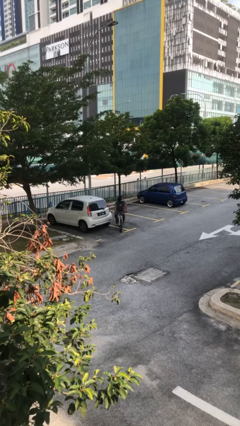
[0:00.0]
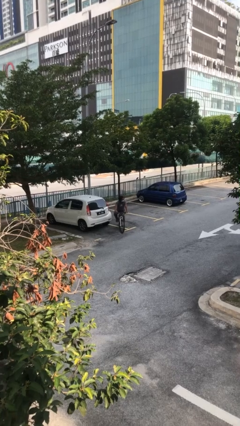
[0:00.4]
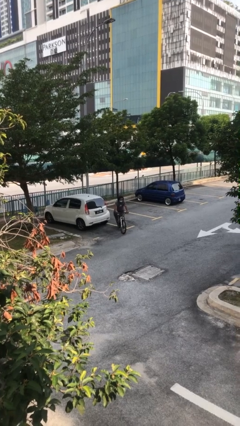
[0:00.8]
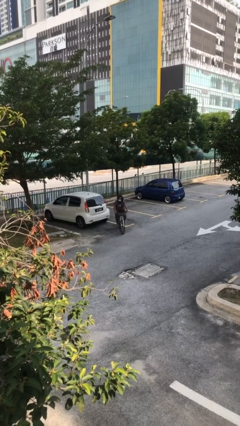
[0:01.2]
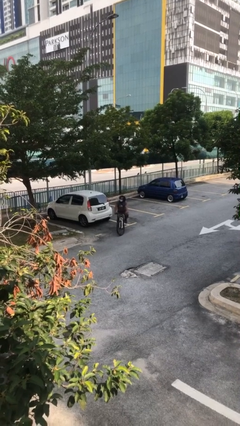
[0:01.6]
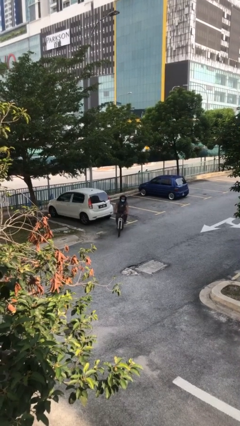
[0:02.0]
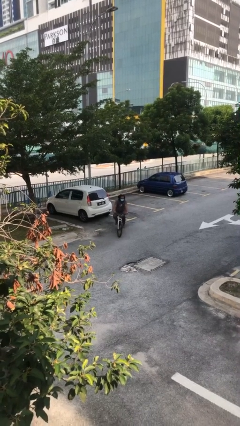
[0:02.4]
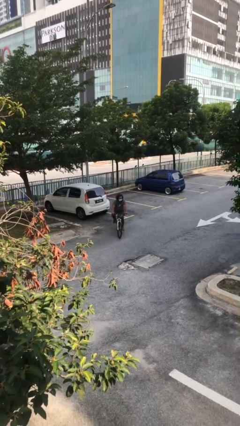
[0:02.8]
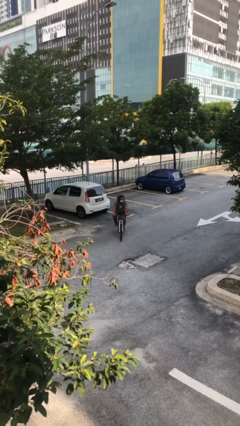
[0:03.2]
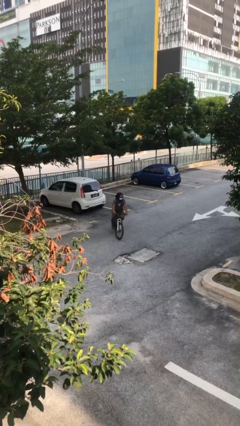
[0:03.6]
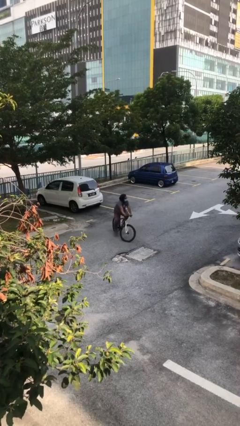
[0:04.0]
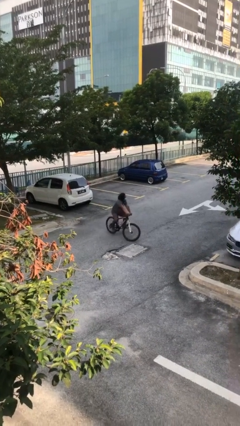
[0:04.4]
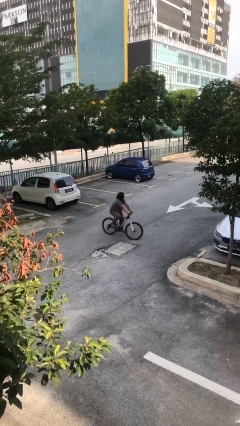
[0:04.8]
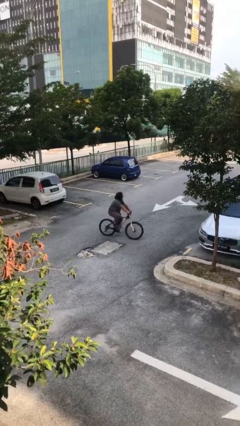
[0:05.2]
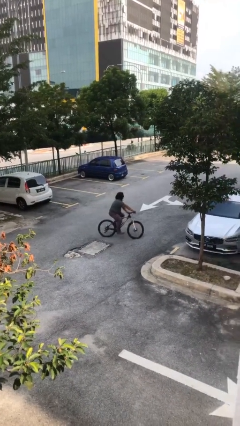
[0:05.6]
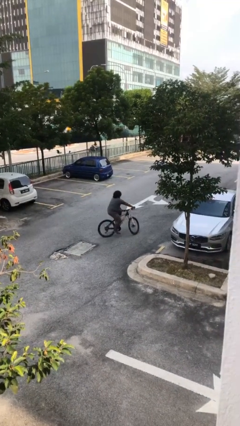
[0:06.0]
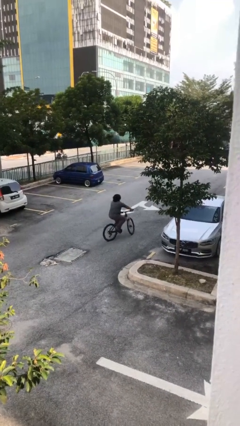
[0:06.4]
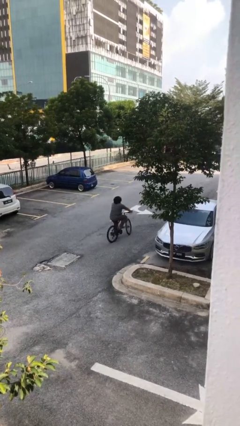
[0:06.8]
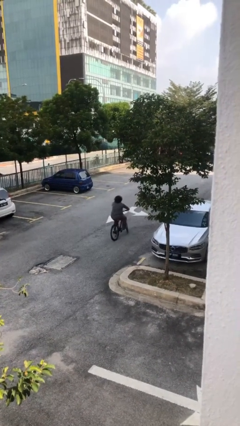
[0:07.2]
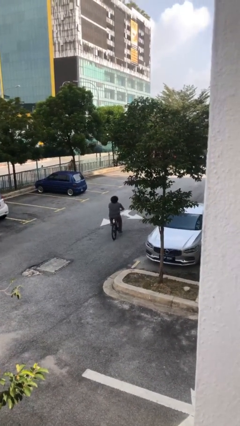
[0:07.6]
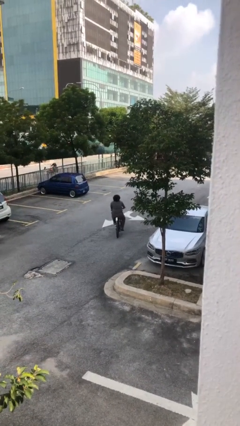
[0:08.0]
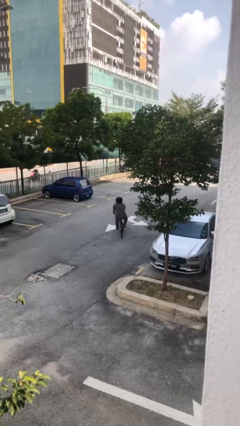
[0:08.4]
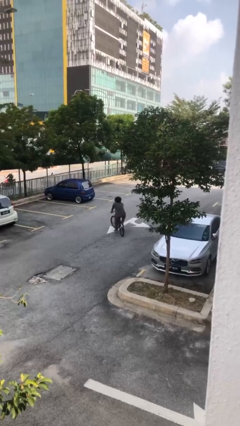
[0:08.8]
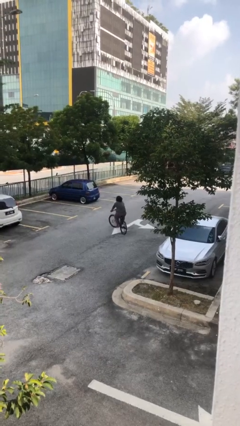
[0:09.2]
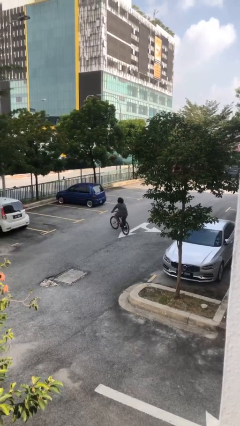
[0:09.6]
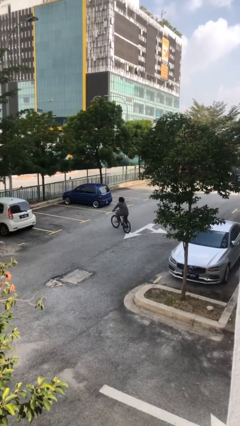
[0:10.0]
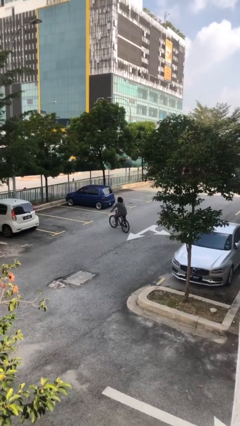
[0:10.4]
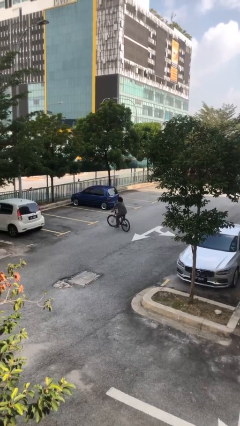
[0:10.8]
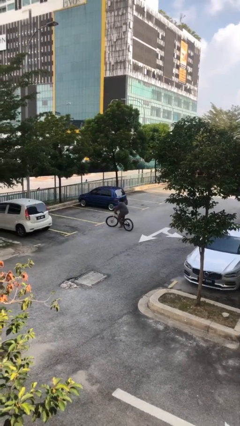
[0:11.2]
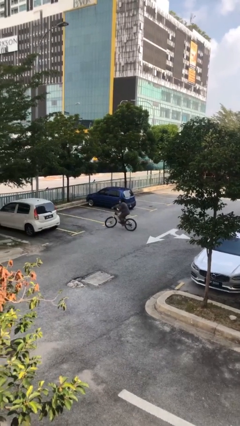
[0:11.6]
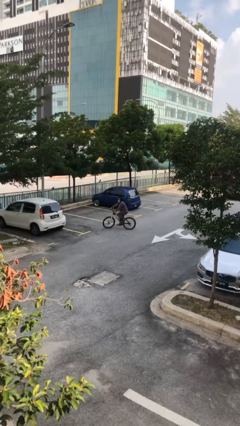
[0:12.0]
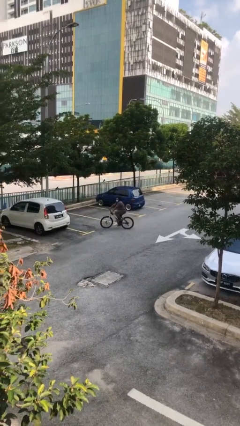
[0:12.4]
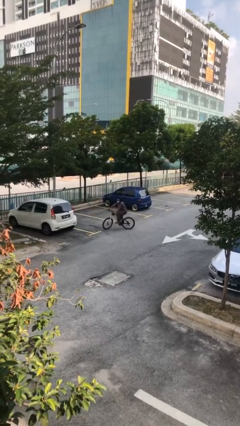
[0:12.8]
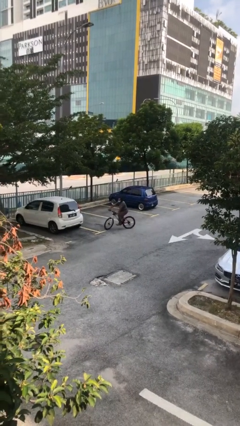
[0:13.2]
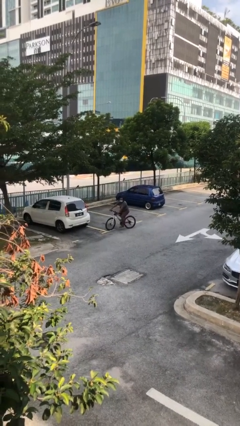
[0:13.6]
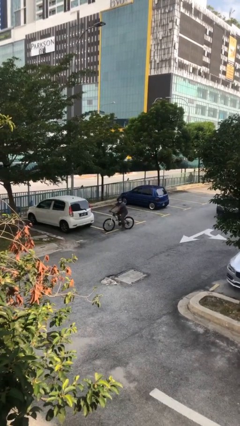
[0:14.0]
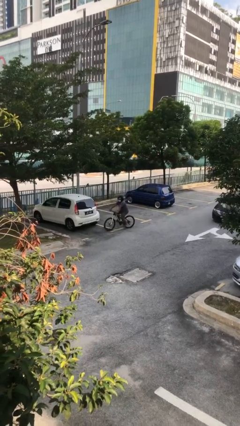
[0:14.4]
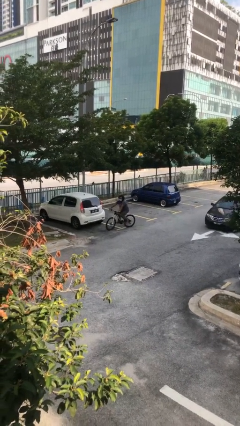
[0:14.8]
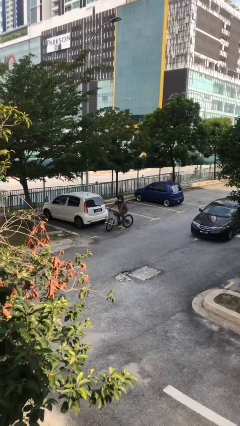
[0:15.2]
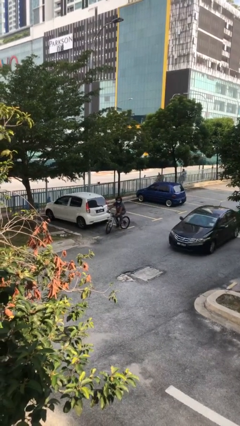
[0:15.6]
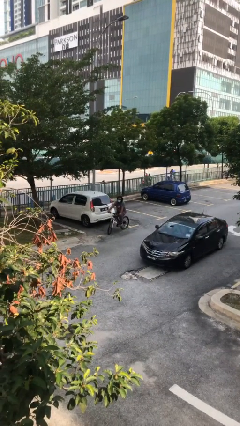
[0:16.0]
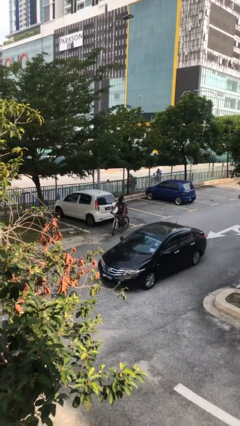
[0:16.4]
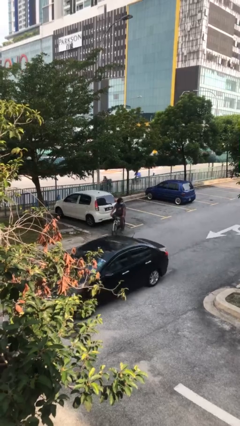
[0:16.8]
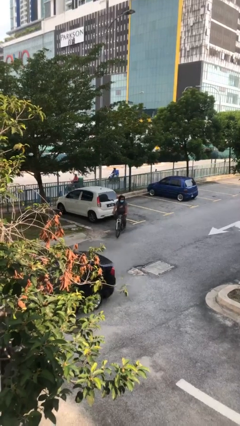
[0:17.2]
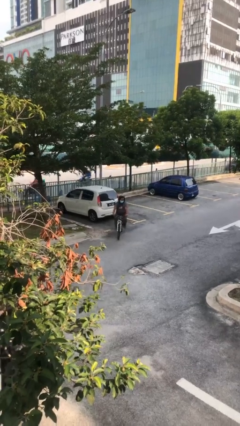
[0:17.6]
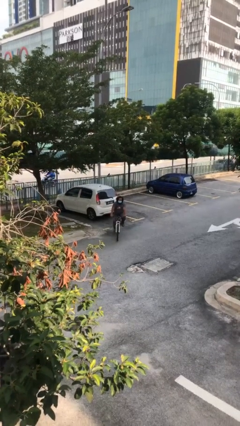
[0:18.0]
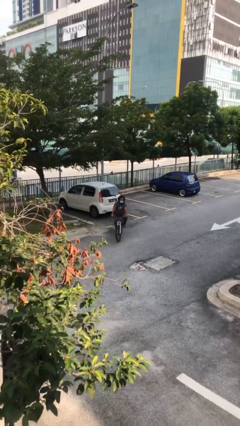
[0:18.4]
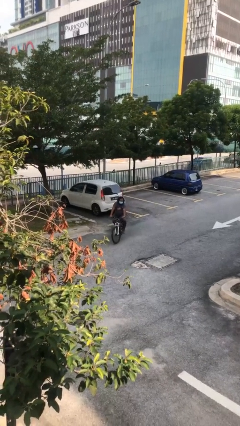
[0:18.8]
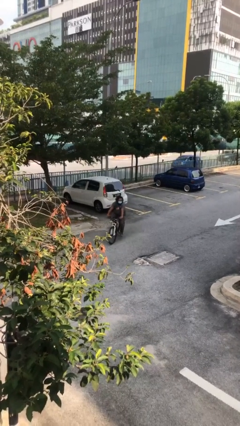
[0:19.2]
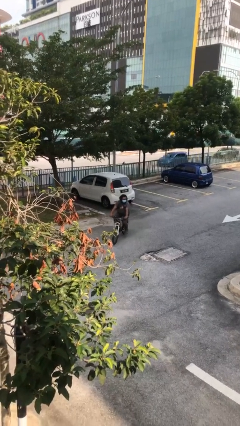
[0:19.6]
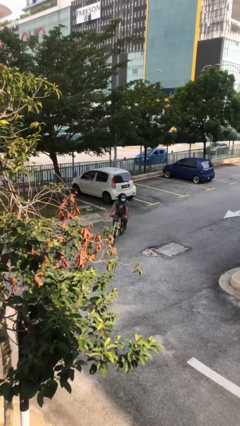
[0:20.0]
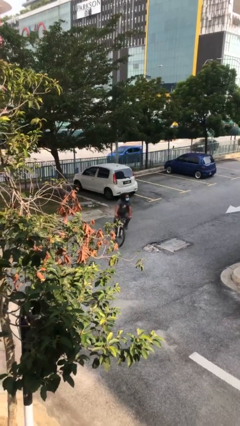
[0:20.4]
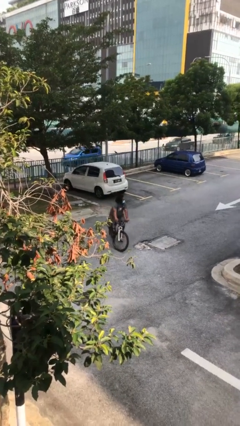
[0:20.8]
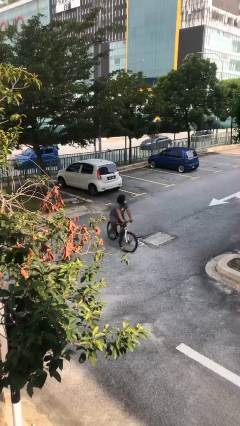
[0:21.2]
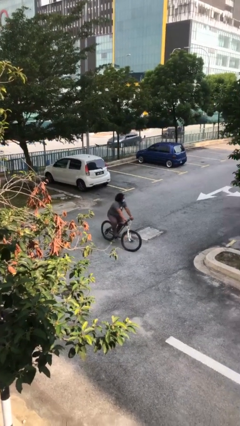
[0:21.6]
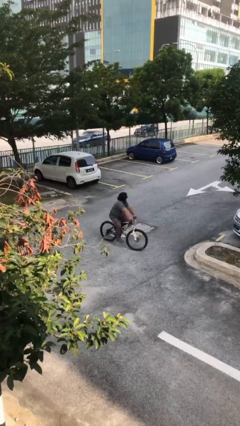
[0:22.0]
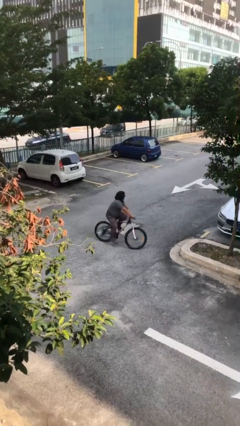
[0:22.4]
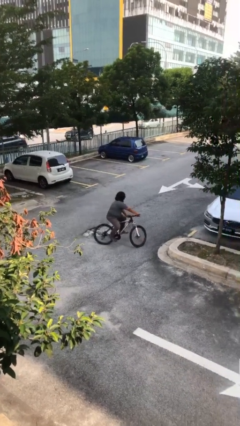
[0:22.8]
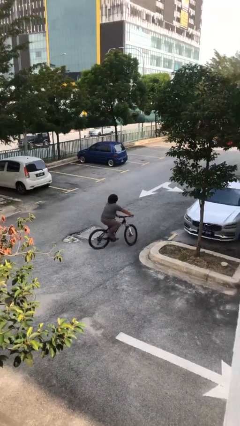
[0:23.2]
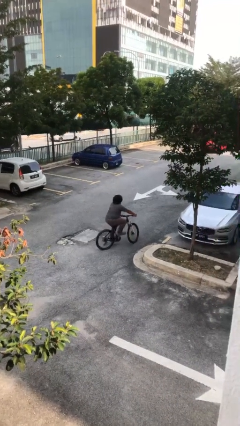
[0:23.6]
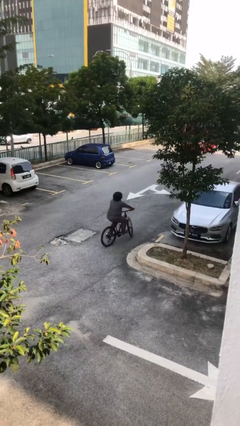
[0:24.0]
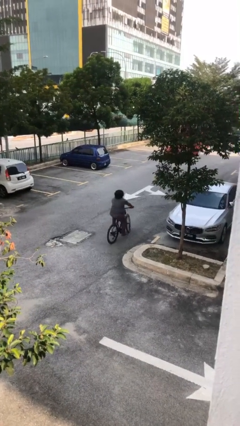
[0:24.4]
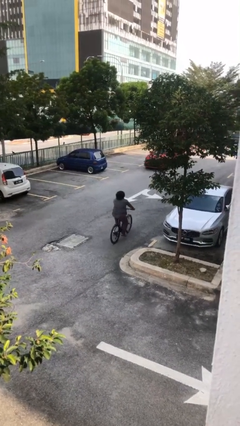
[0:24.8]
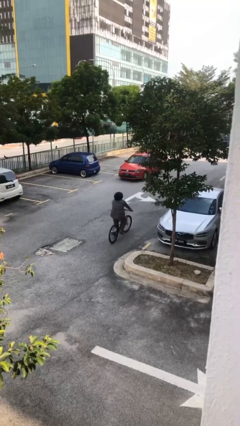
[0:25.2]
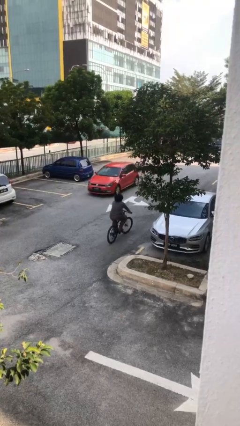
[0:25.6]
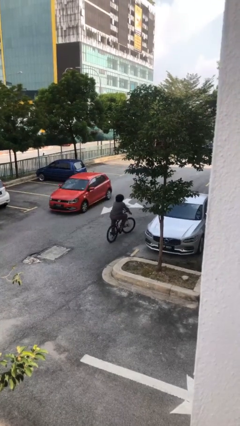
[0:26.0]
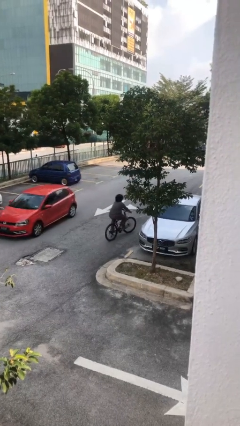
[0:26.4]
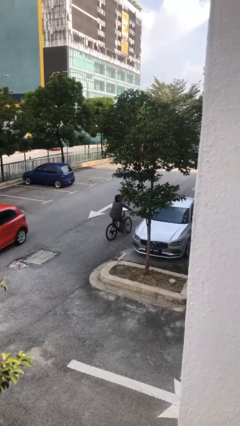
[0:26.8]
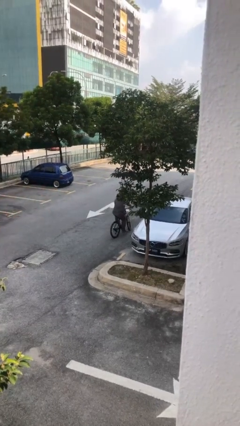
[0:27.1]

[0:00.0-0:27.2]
person rides bicycle

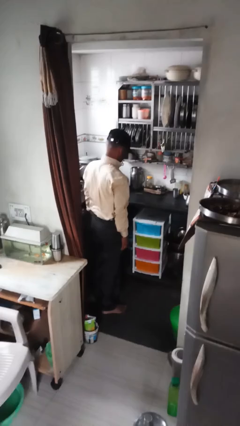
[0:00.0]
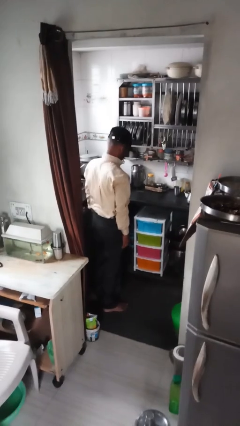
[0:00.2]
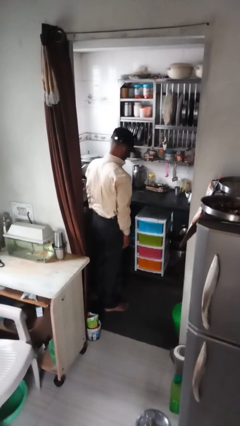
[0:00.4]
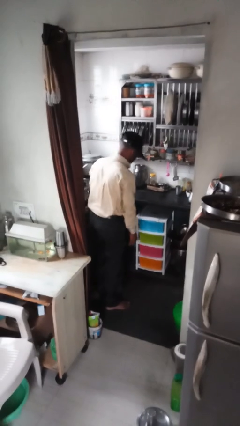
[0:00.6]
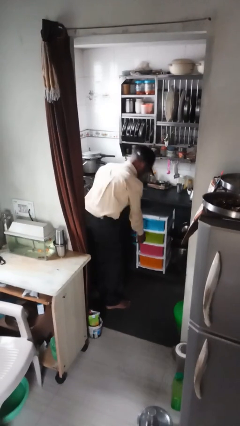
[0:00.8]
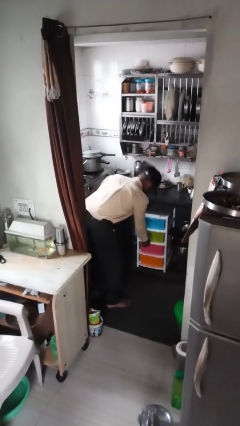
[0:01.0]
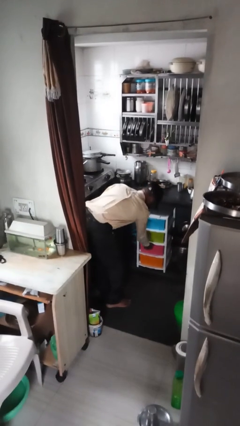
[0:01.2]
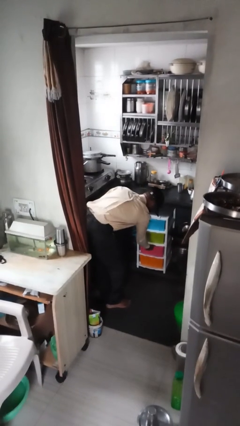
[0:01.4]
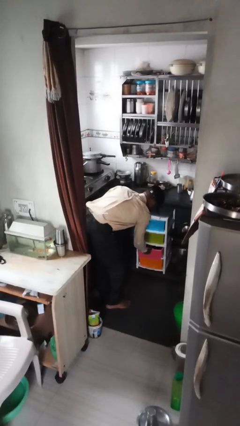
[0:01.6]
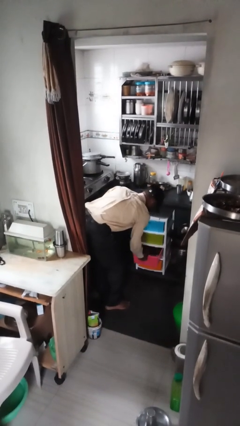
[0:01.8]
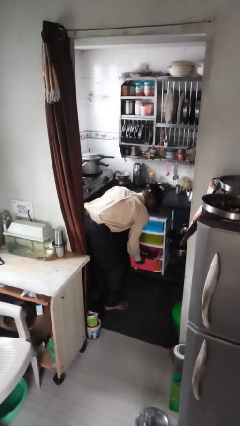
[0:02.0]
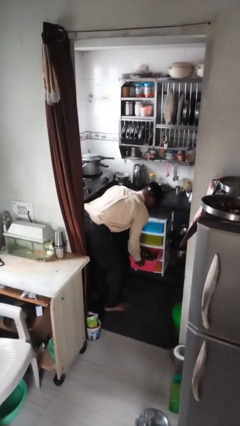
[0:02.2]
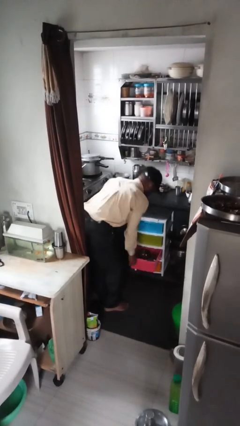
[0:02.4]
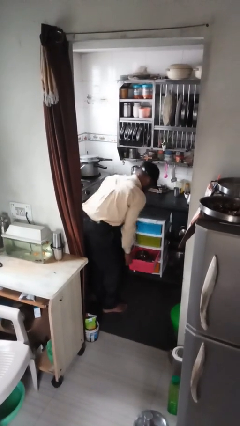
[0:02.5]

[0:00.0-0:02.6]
person opens kitchen drawer

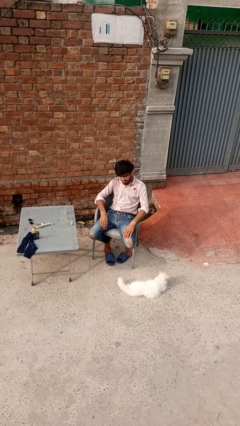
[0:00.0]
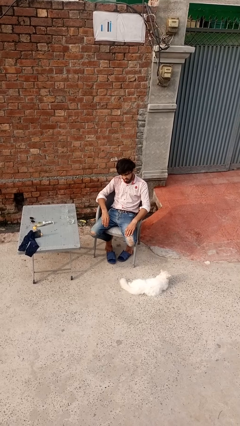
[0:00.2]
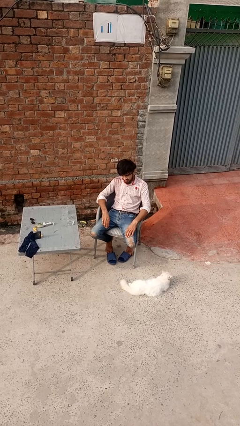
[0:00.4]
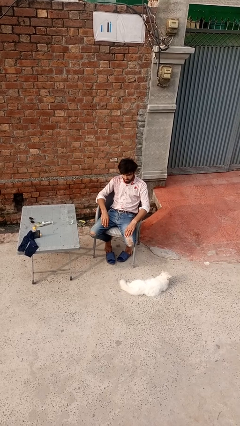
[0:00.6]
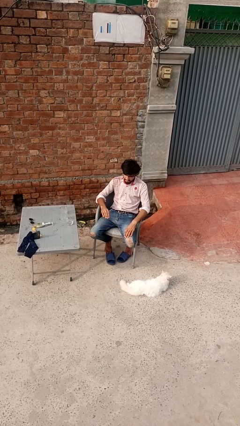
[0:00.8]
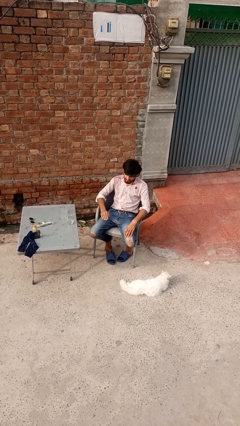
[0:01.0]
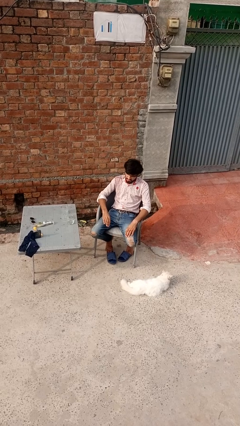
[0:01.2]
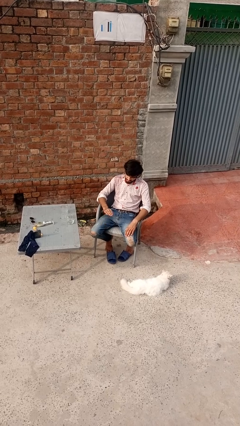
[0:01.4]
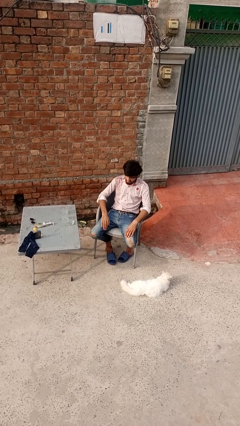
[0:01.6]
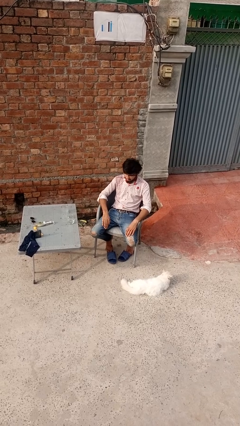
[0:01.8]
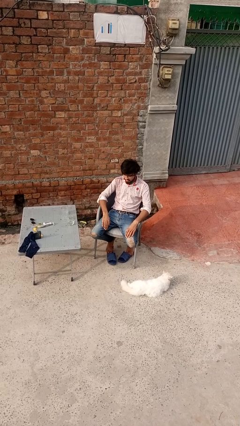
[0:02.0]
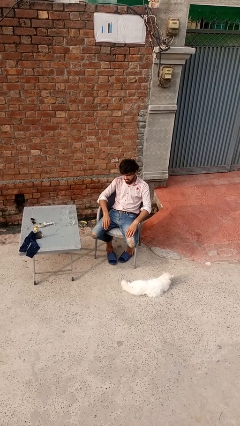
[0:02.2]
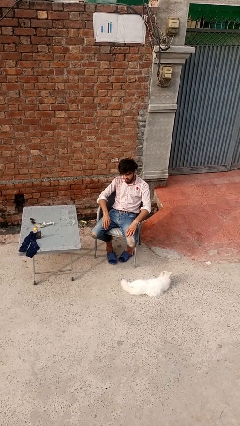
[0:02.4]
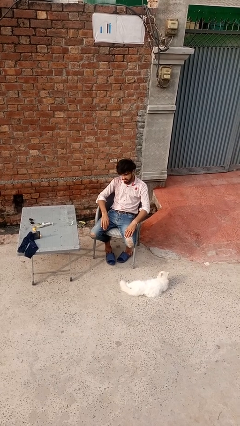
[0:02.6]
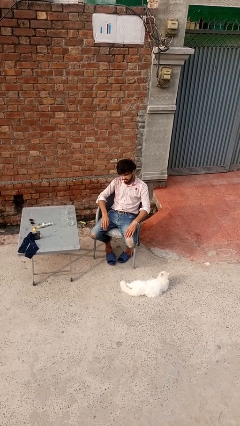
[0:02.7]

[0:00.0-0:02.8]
person slaps hands on thighs
